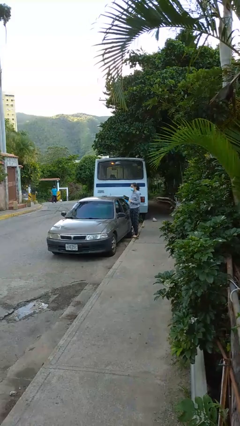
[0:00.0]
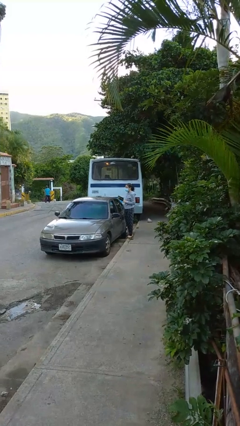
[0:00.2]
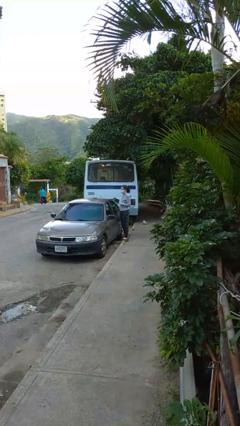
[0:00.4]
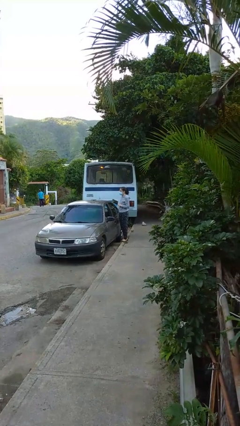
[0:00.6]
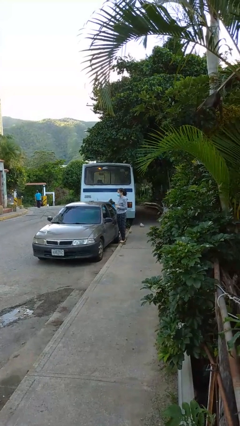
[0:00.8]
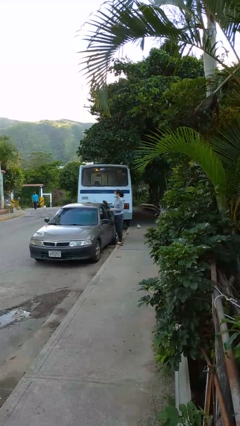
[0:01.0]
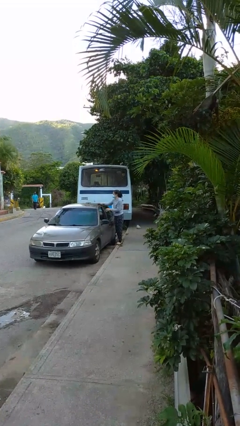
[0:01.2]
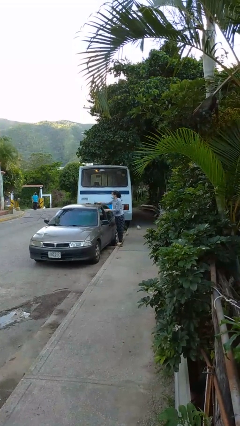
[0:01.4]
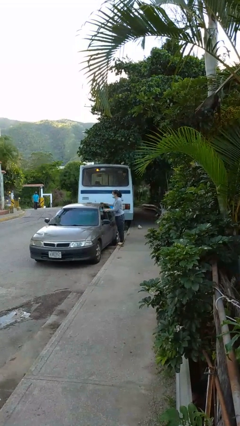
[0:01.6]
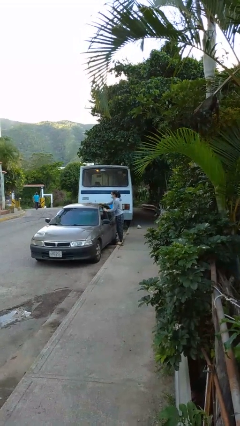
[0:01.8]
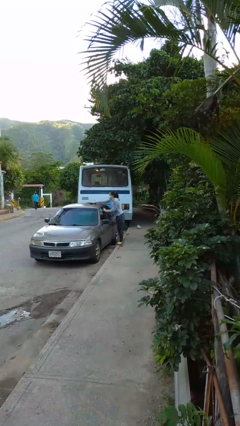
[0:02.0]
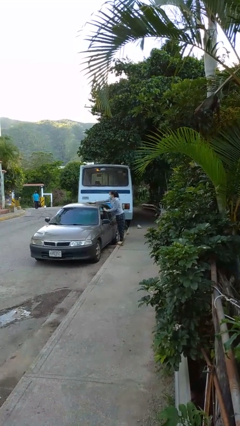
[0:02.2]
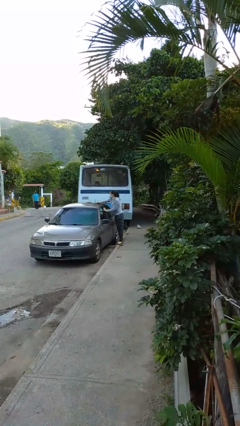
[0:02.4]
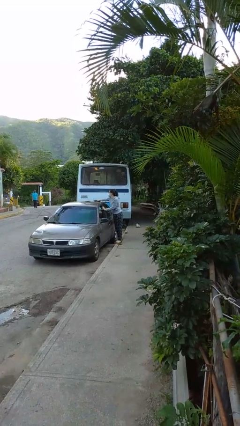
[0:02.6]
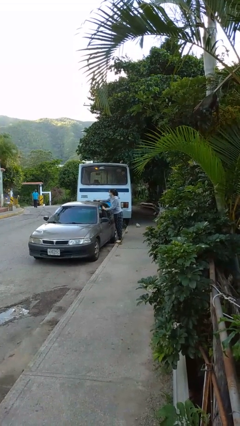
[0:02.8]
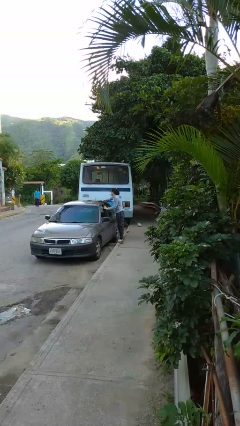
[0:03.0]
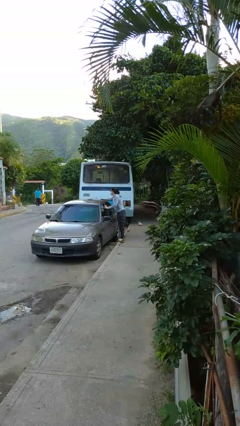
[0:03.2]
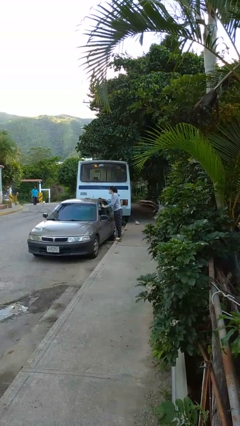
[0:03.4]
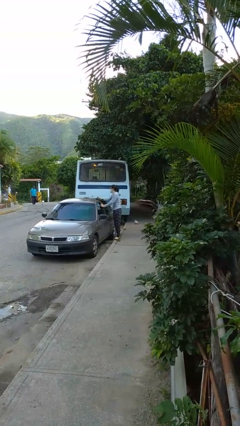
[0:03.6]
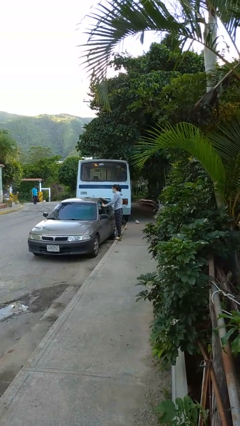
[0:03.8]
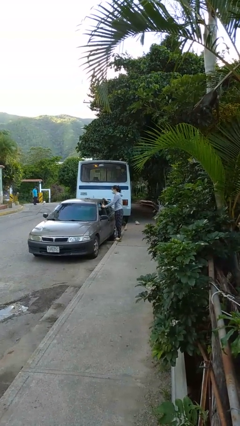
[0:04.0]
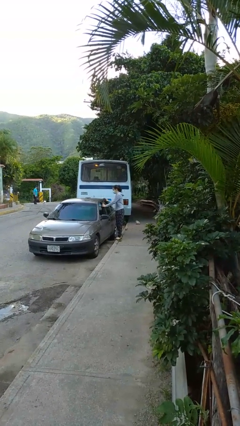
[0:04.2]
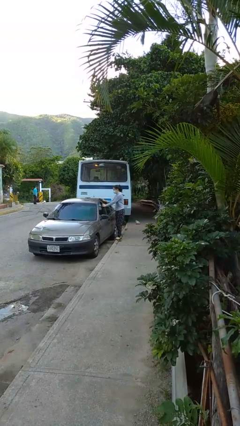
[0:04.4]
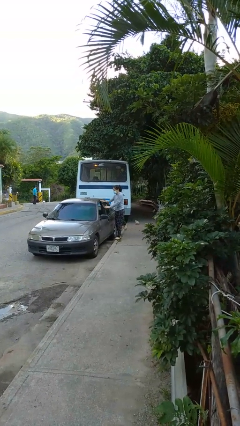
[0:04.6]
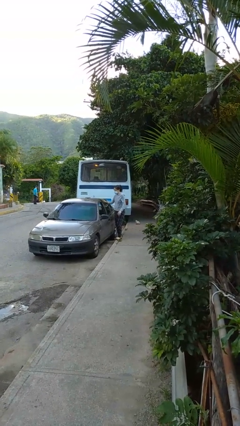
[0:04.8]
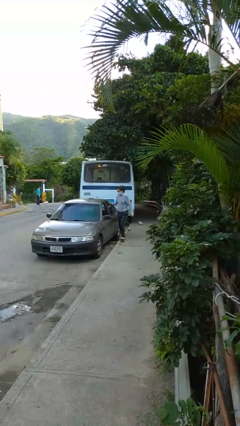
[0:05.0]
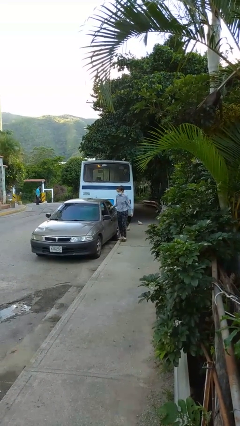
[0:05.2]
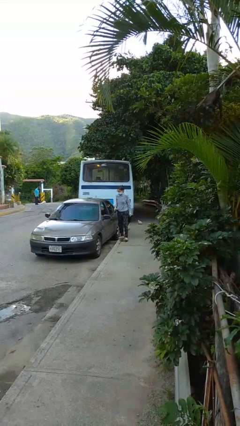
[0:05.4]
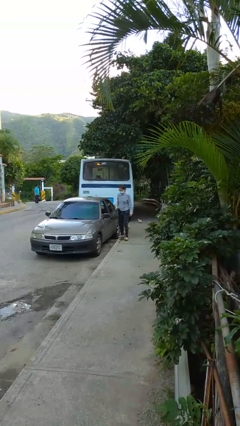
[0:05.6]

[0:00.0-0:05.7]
person polishes car with rag

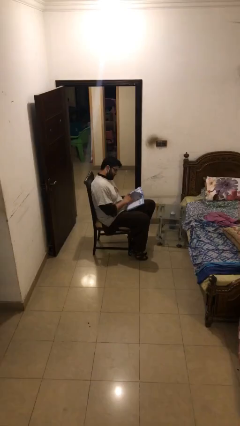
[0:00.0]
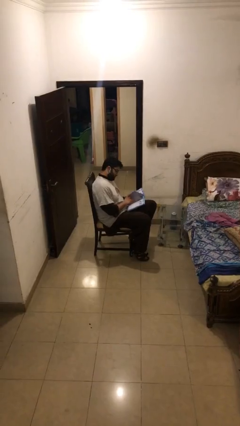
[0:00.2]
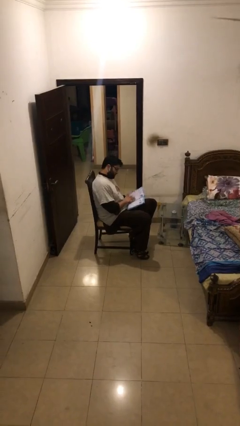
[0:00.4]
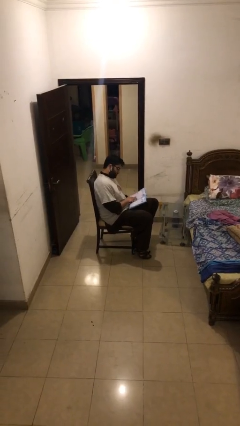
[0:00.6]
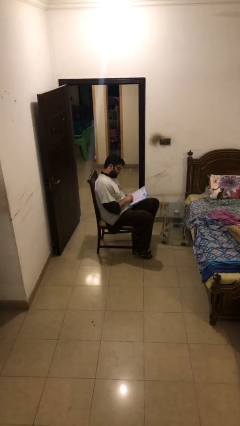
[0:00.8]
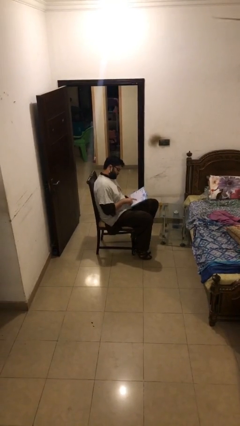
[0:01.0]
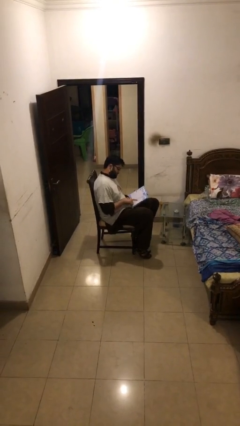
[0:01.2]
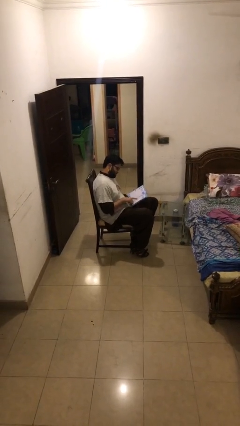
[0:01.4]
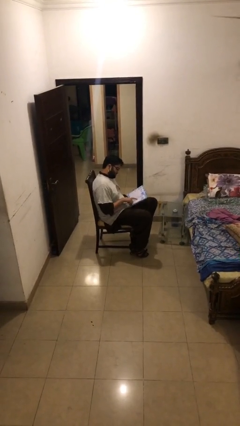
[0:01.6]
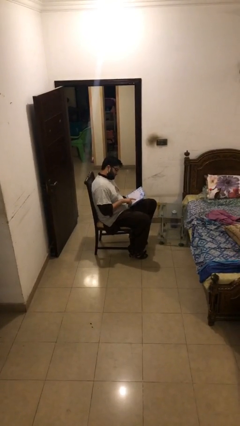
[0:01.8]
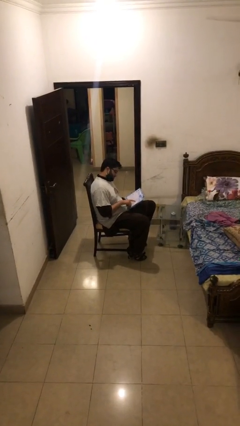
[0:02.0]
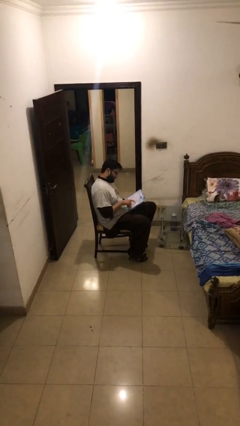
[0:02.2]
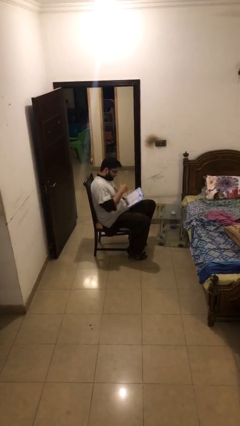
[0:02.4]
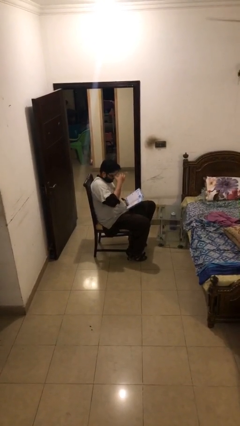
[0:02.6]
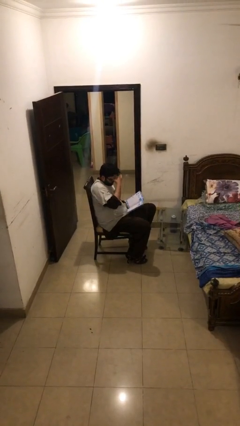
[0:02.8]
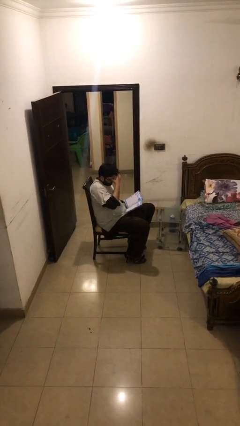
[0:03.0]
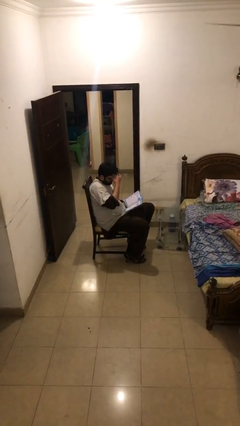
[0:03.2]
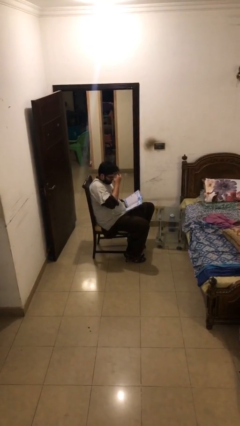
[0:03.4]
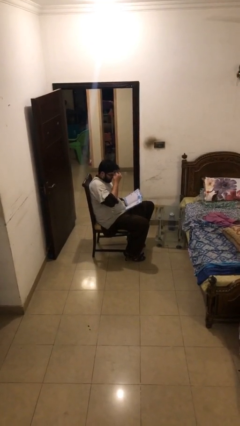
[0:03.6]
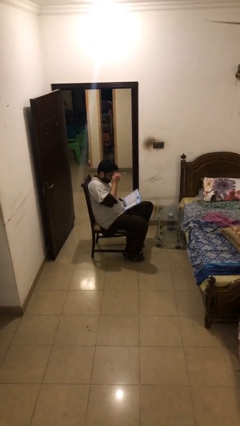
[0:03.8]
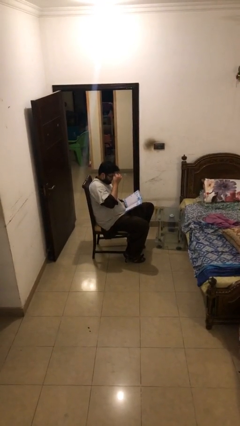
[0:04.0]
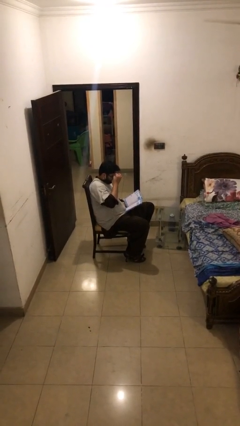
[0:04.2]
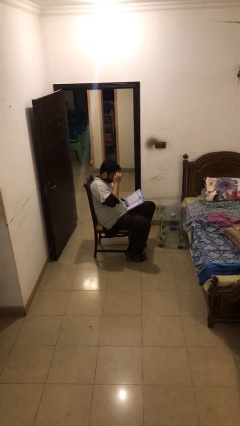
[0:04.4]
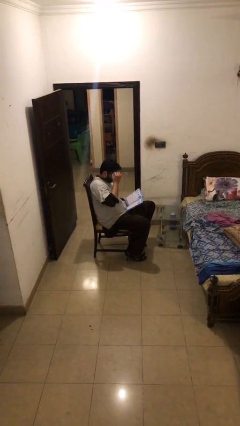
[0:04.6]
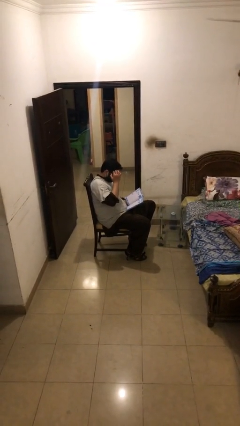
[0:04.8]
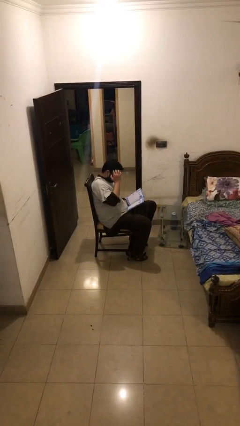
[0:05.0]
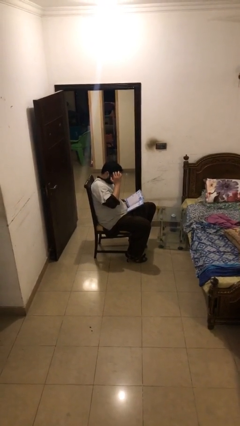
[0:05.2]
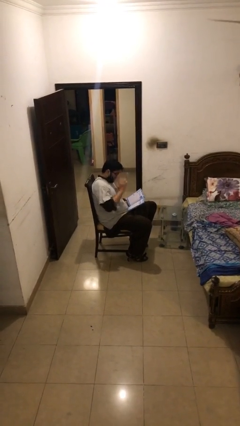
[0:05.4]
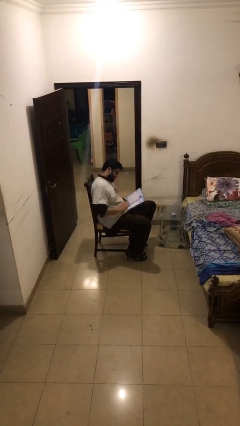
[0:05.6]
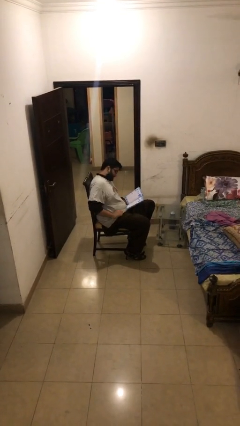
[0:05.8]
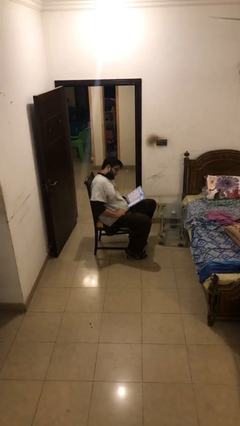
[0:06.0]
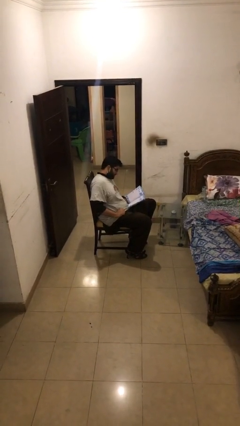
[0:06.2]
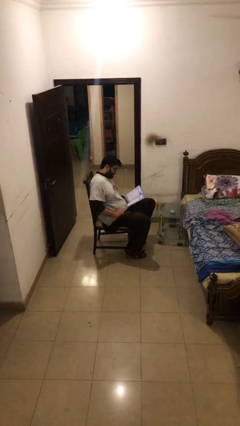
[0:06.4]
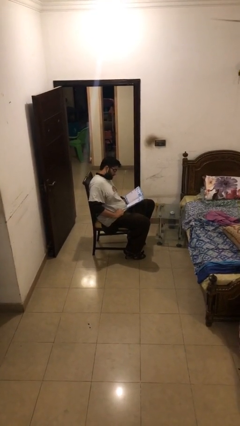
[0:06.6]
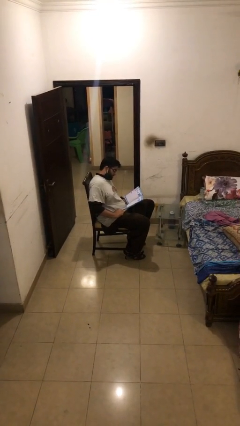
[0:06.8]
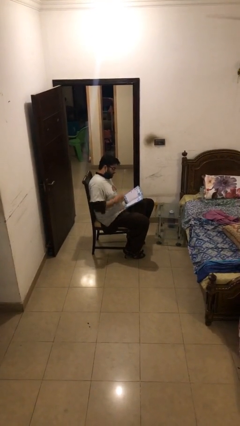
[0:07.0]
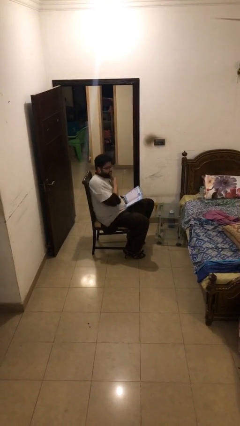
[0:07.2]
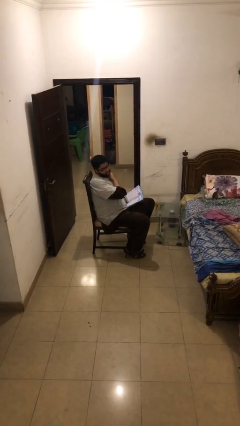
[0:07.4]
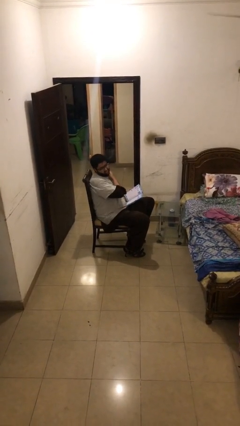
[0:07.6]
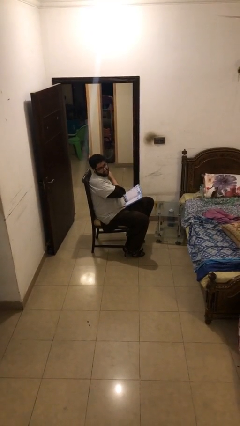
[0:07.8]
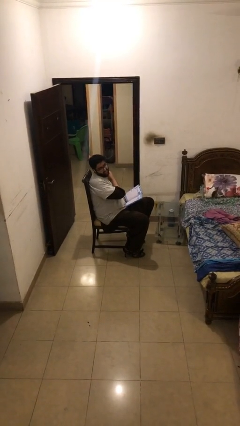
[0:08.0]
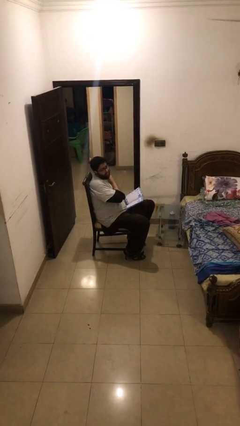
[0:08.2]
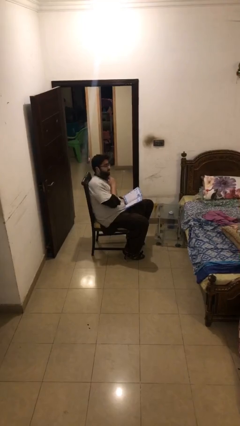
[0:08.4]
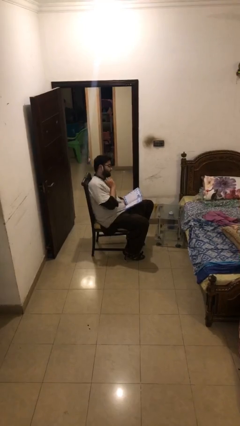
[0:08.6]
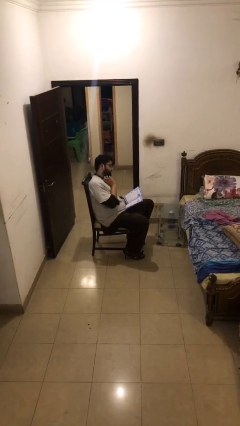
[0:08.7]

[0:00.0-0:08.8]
person reads document

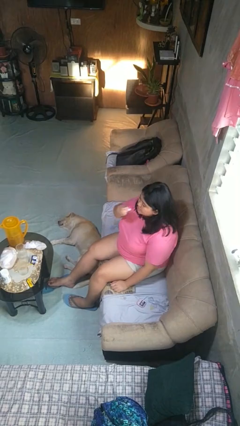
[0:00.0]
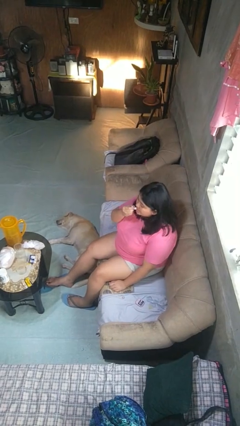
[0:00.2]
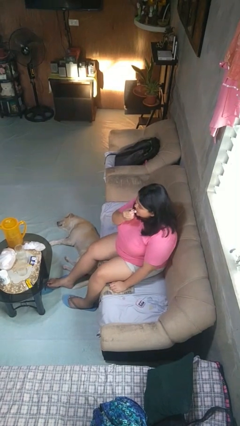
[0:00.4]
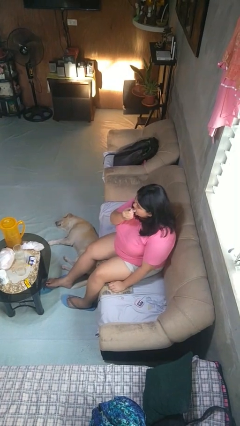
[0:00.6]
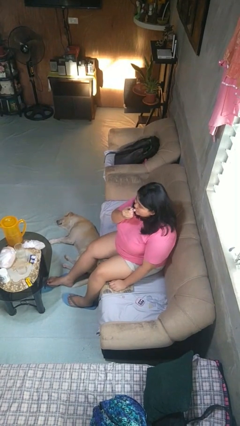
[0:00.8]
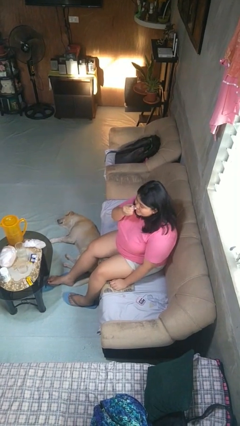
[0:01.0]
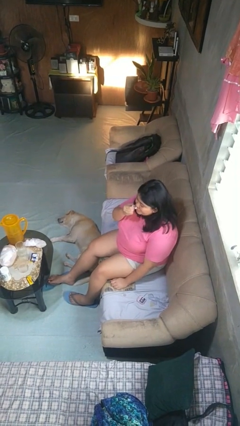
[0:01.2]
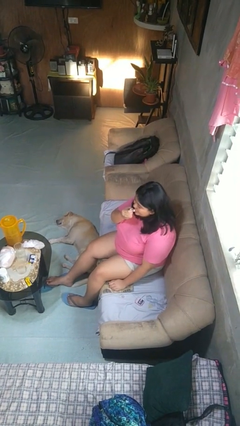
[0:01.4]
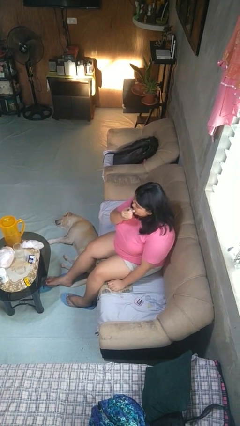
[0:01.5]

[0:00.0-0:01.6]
person applies lip makeup

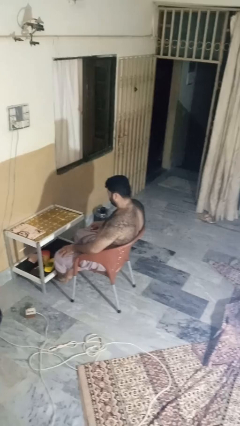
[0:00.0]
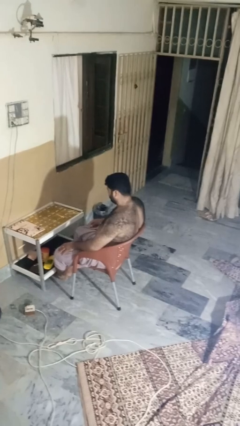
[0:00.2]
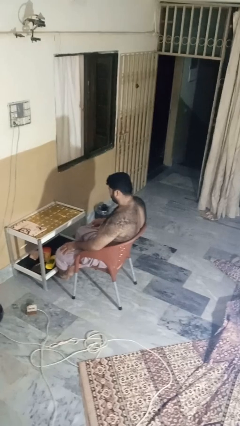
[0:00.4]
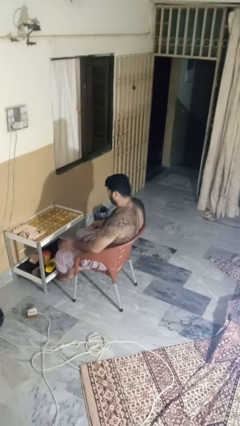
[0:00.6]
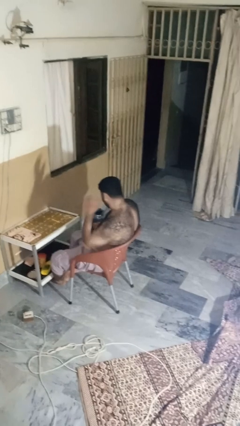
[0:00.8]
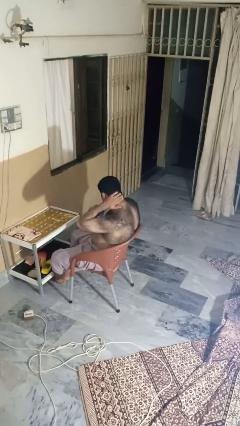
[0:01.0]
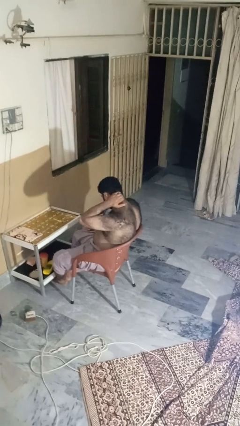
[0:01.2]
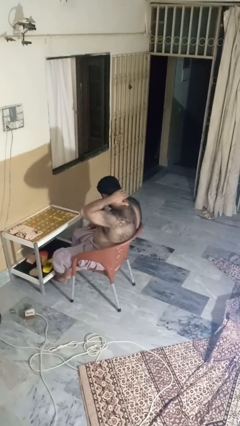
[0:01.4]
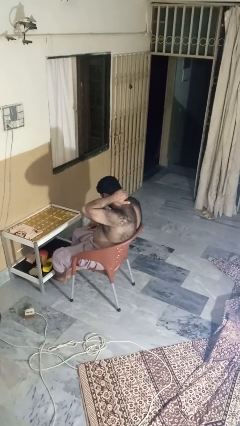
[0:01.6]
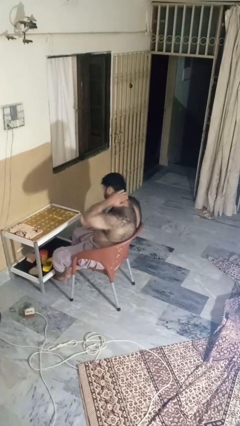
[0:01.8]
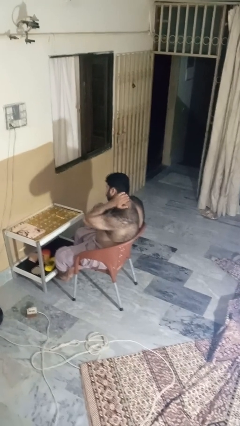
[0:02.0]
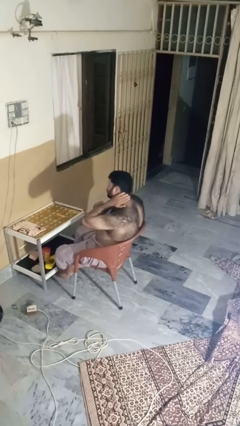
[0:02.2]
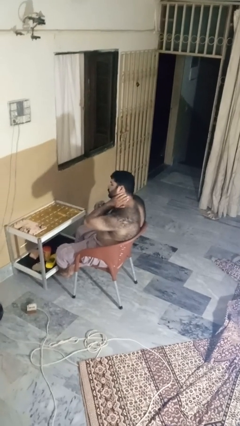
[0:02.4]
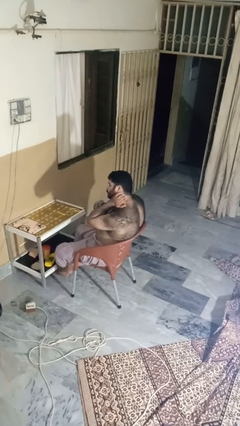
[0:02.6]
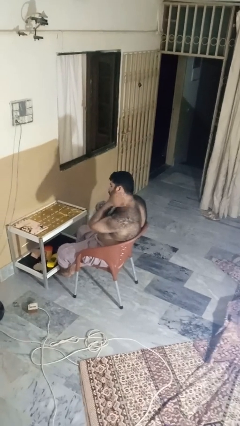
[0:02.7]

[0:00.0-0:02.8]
person rubs neck
